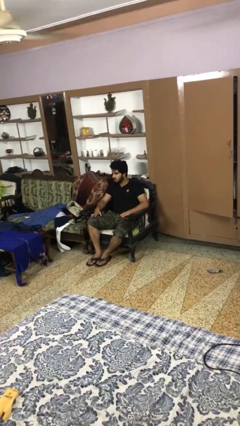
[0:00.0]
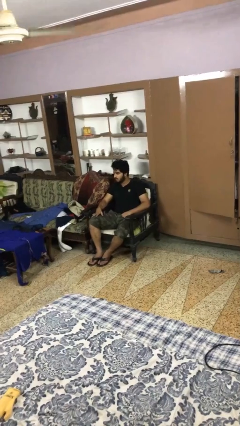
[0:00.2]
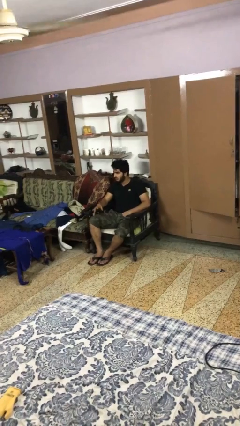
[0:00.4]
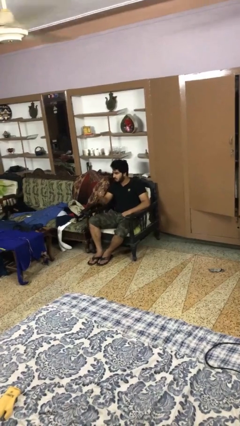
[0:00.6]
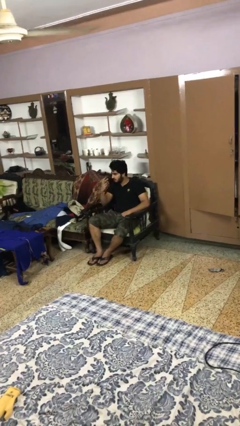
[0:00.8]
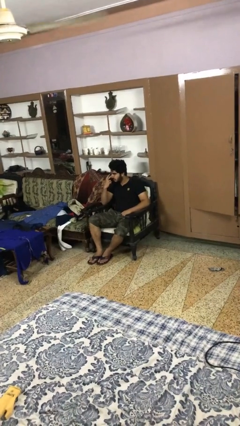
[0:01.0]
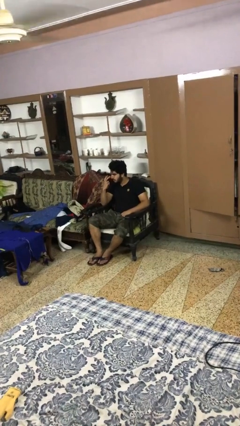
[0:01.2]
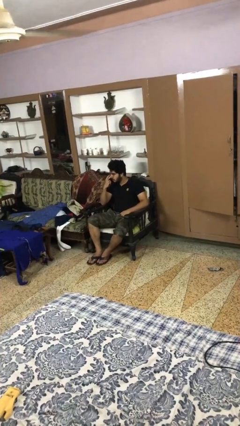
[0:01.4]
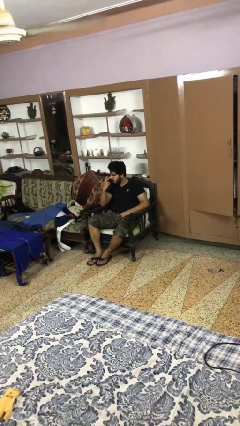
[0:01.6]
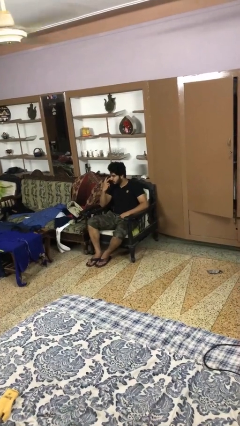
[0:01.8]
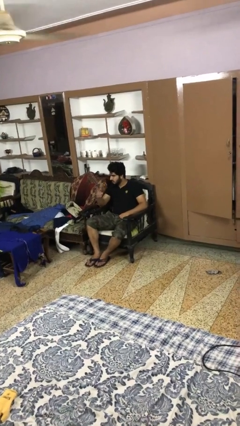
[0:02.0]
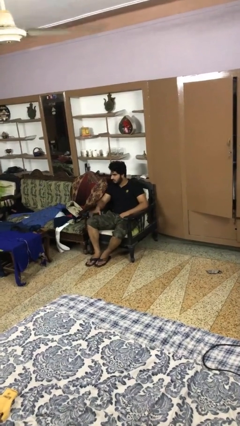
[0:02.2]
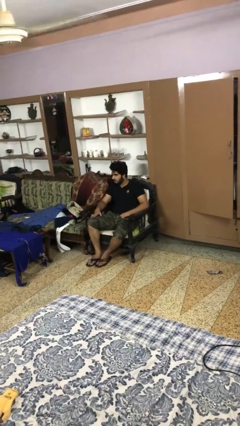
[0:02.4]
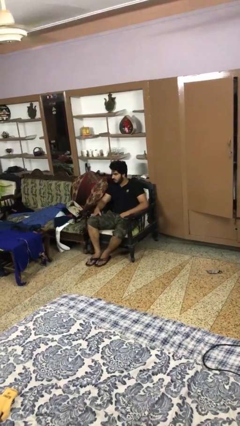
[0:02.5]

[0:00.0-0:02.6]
person gestures watch closely

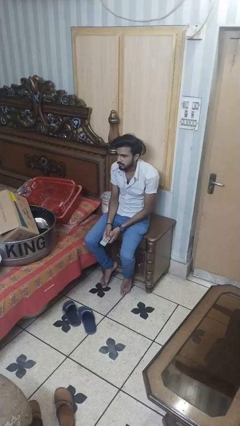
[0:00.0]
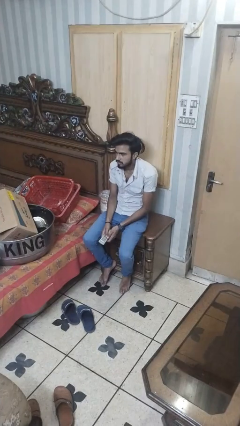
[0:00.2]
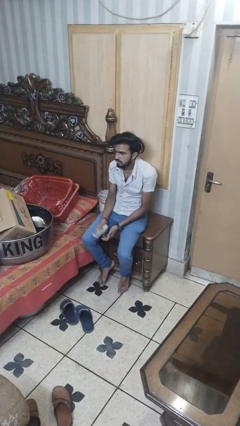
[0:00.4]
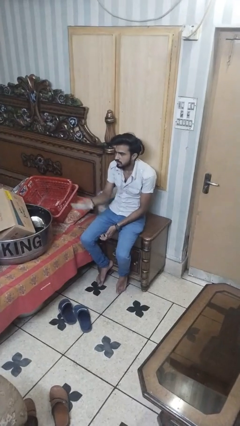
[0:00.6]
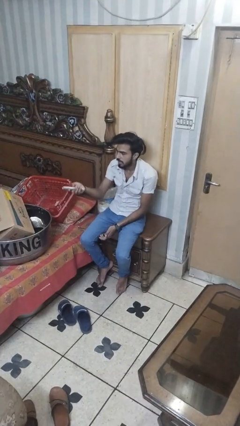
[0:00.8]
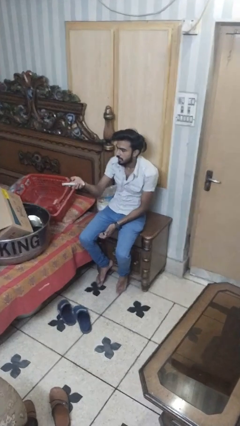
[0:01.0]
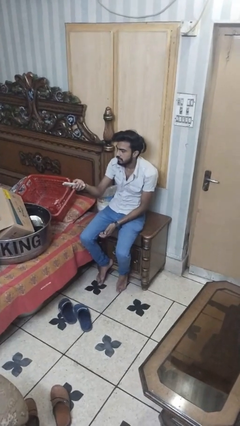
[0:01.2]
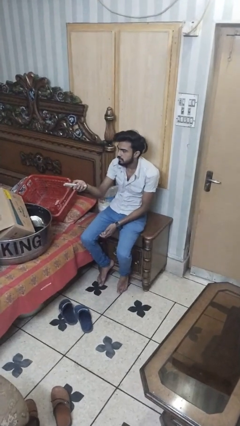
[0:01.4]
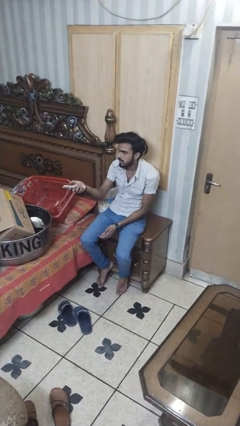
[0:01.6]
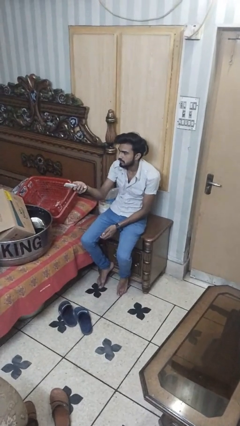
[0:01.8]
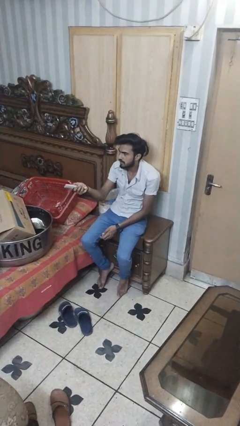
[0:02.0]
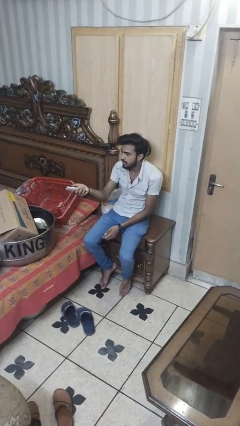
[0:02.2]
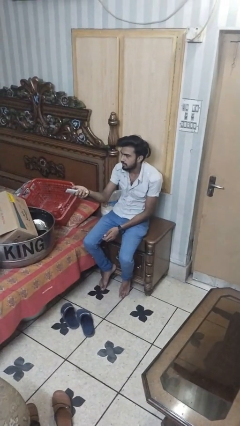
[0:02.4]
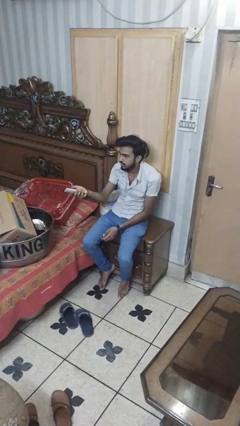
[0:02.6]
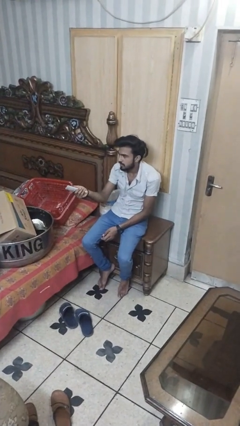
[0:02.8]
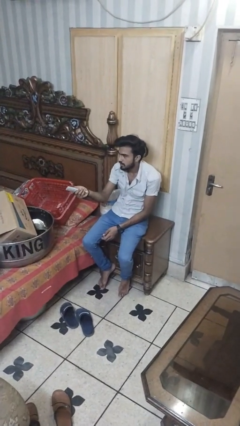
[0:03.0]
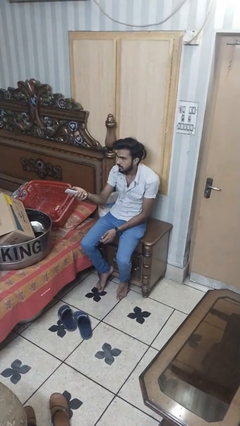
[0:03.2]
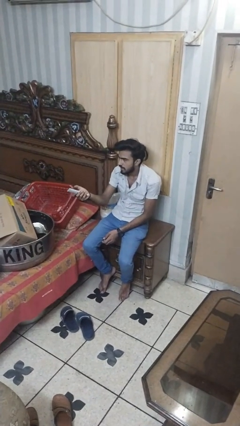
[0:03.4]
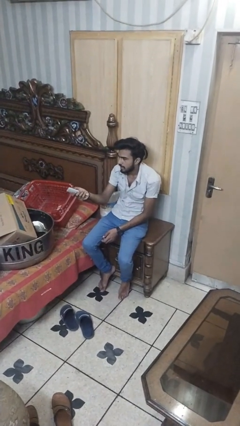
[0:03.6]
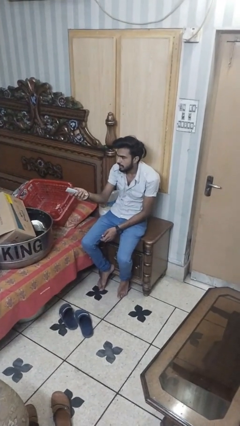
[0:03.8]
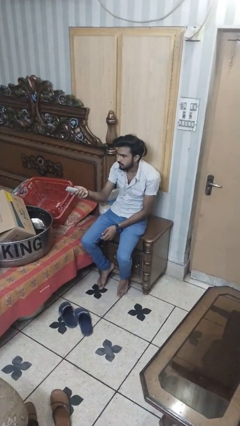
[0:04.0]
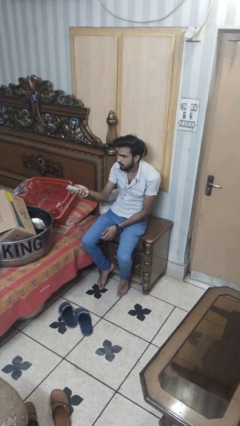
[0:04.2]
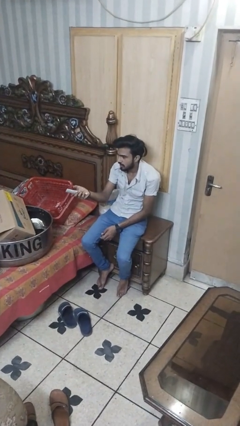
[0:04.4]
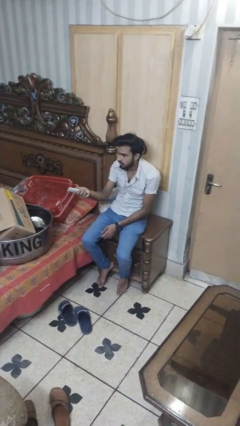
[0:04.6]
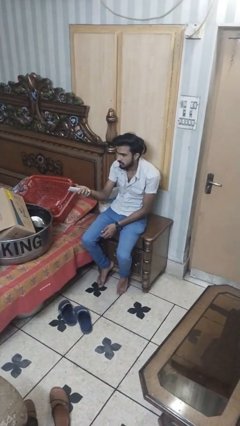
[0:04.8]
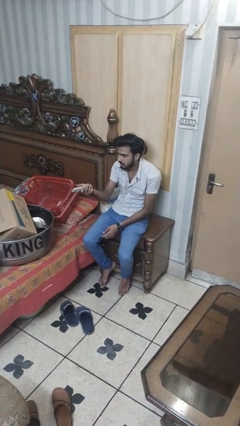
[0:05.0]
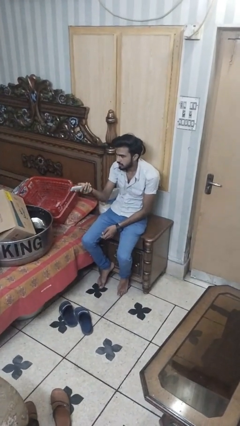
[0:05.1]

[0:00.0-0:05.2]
person uses television remote

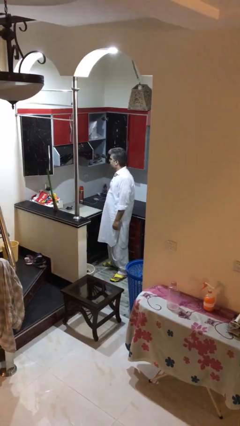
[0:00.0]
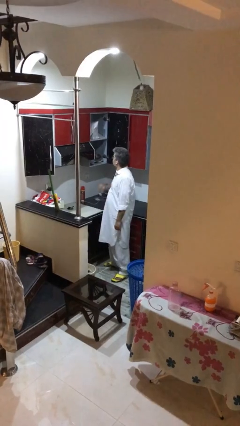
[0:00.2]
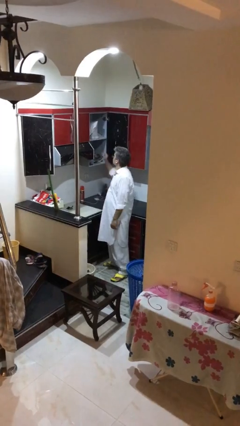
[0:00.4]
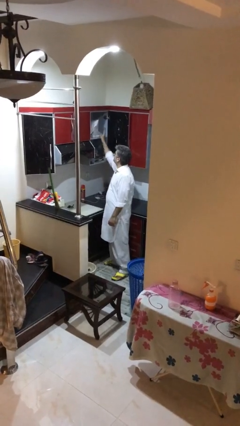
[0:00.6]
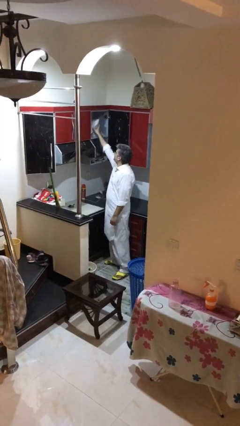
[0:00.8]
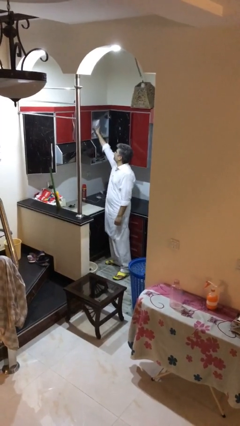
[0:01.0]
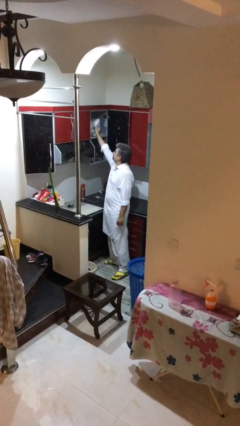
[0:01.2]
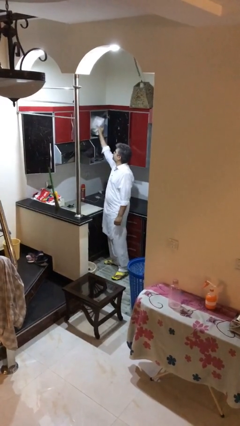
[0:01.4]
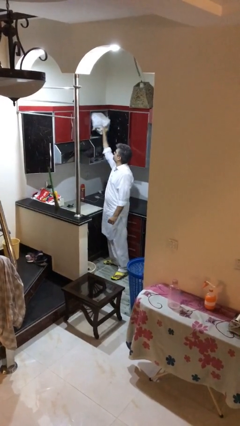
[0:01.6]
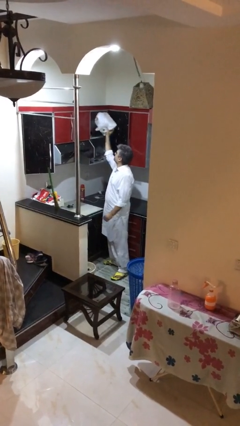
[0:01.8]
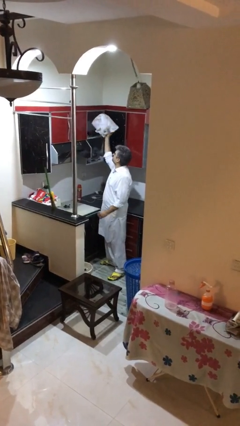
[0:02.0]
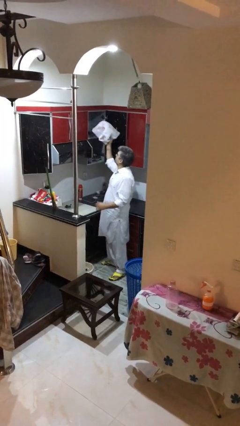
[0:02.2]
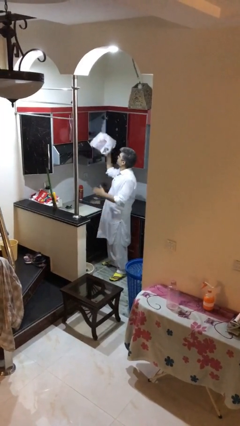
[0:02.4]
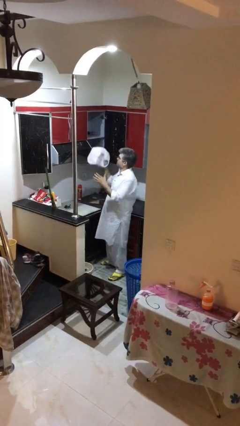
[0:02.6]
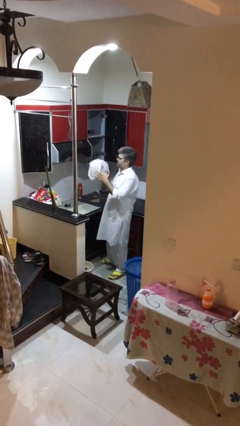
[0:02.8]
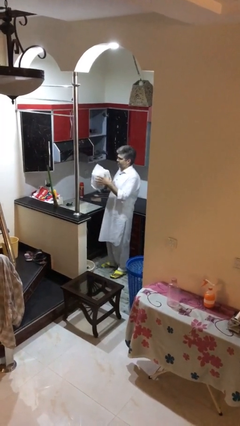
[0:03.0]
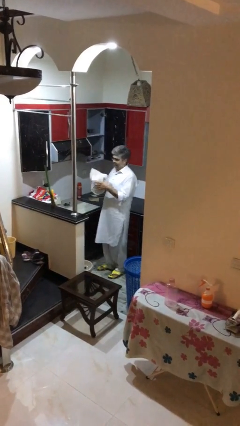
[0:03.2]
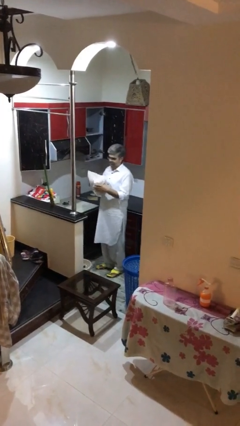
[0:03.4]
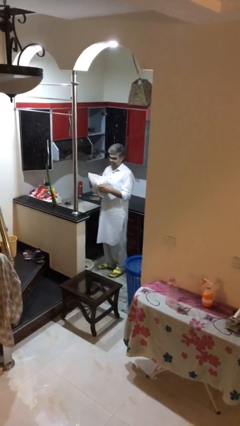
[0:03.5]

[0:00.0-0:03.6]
person picks up object from shelf

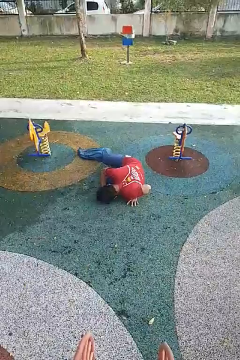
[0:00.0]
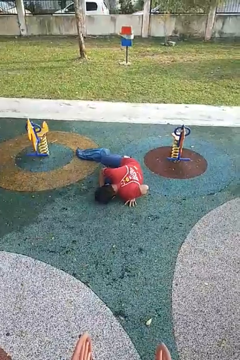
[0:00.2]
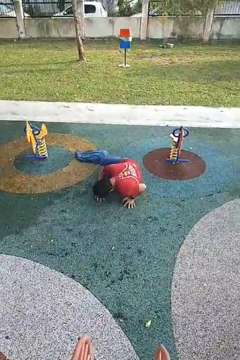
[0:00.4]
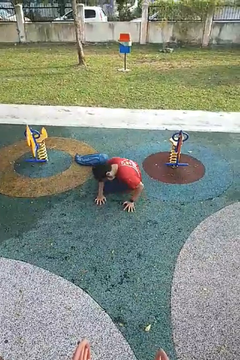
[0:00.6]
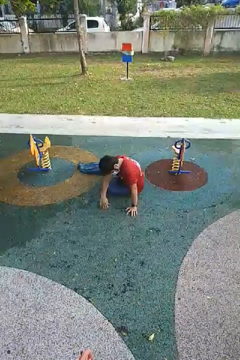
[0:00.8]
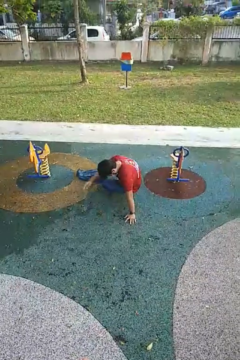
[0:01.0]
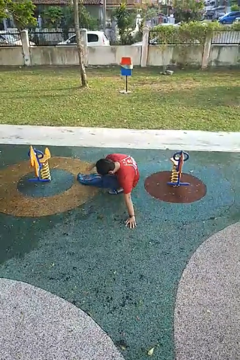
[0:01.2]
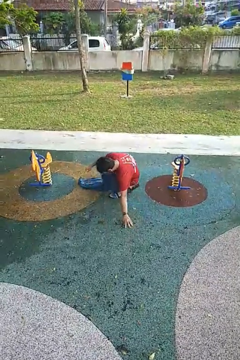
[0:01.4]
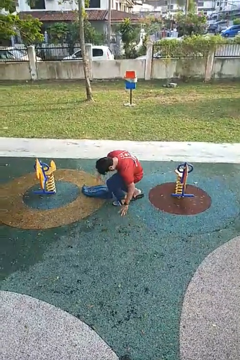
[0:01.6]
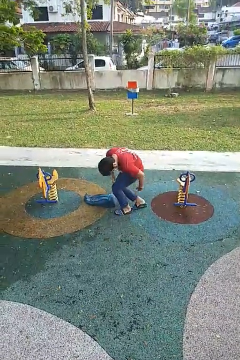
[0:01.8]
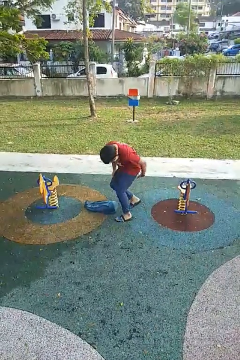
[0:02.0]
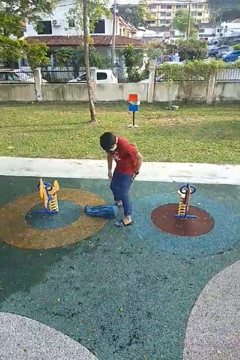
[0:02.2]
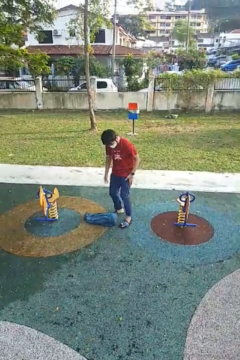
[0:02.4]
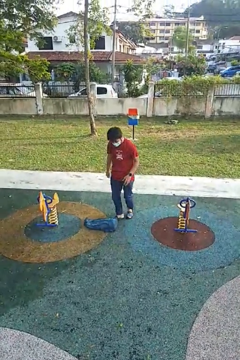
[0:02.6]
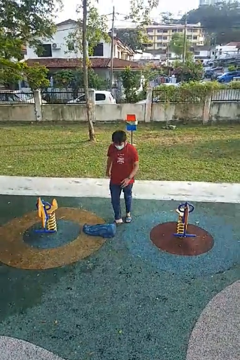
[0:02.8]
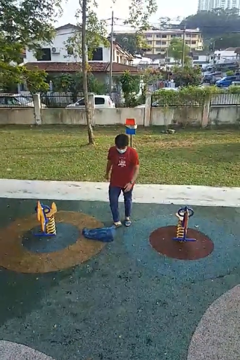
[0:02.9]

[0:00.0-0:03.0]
person stands up from floor

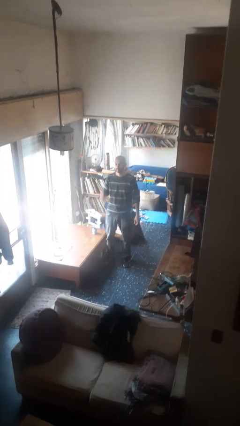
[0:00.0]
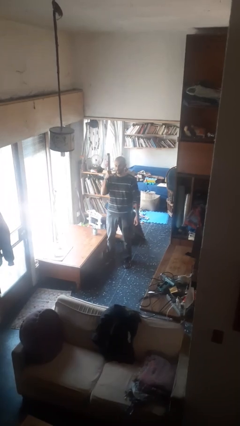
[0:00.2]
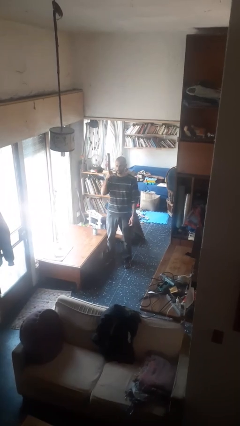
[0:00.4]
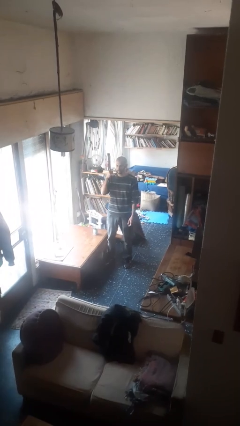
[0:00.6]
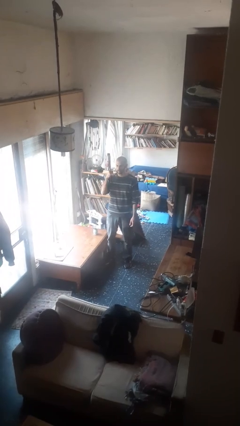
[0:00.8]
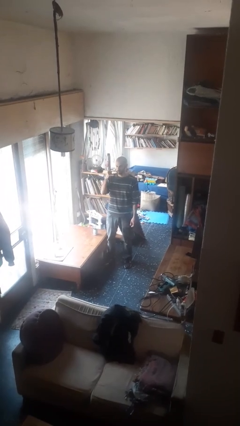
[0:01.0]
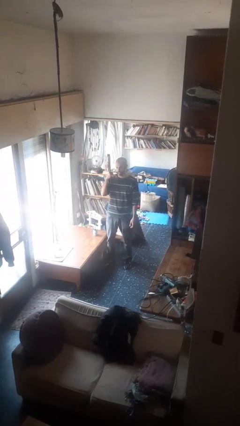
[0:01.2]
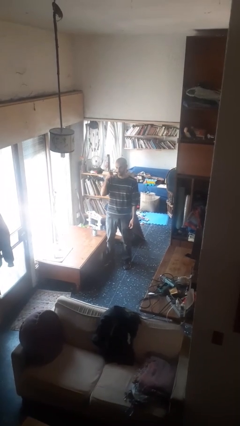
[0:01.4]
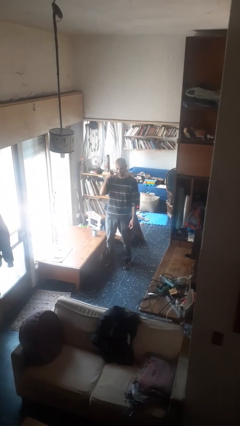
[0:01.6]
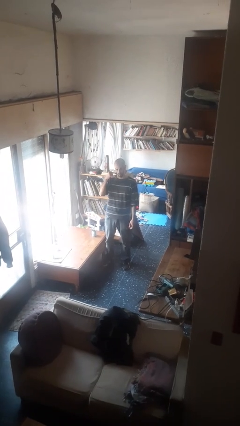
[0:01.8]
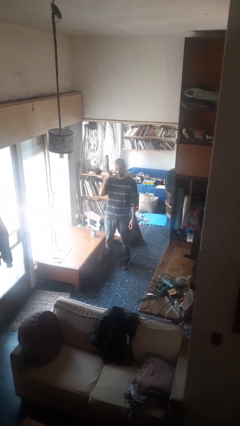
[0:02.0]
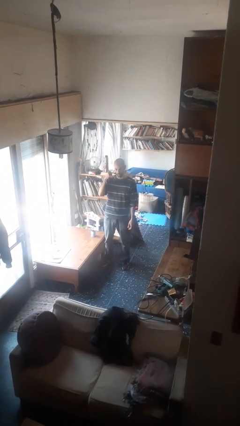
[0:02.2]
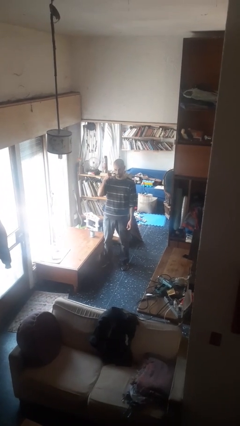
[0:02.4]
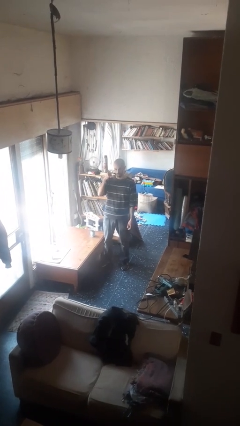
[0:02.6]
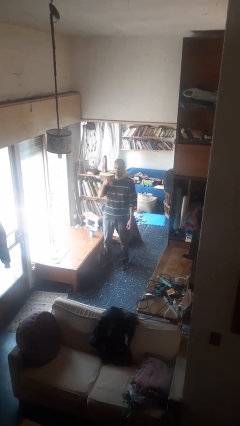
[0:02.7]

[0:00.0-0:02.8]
person gestures call me

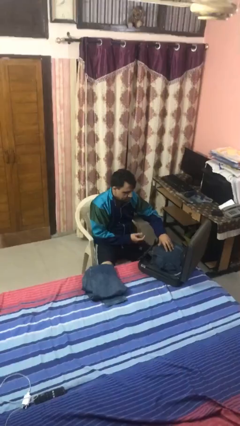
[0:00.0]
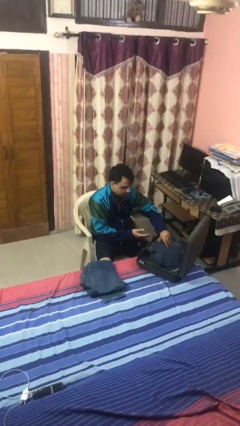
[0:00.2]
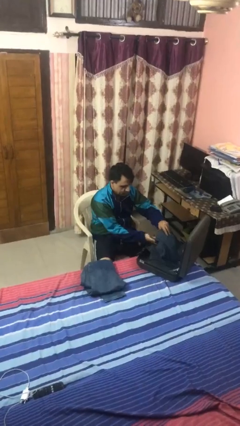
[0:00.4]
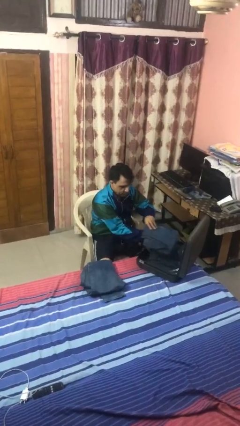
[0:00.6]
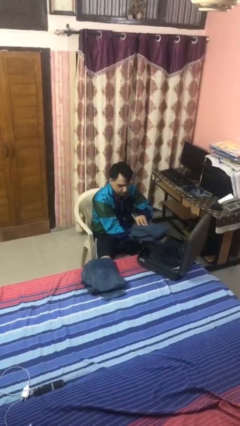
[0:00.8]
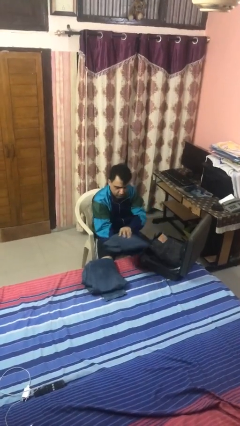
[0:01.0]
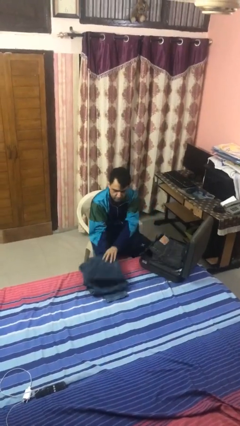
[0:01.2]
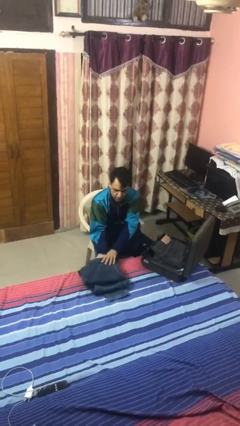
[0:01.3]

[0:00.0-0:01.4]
person unloads clothes from suitcase
